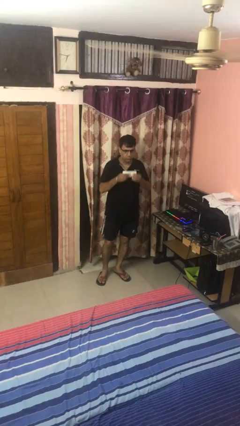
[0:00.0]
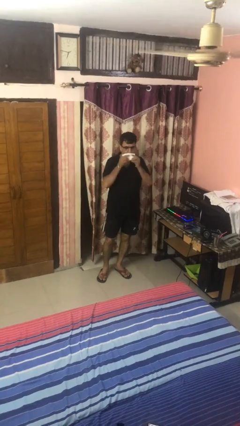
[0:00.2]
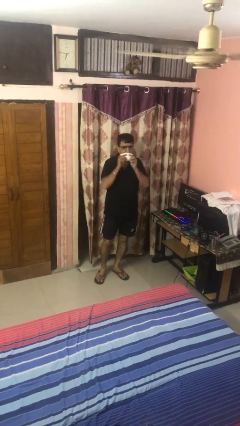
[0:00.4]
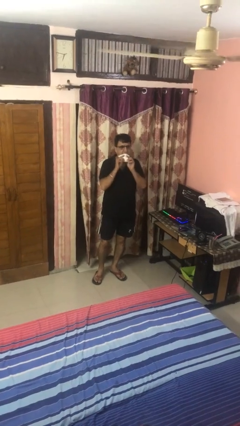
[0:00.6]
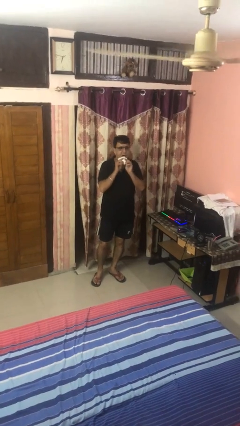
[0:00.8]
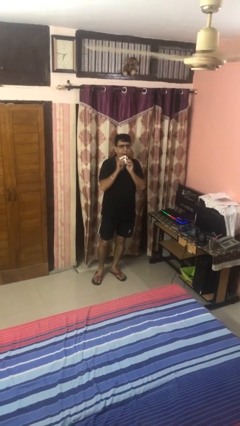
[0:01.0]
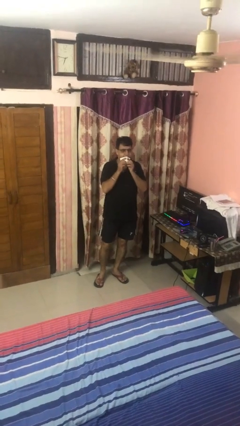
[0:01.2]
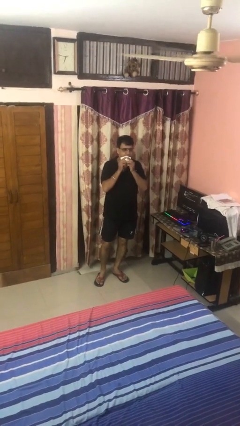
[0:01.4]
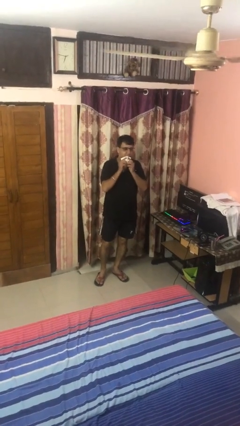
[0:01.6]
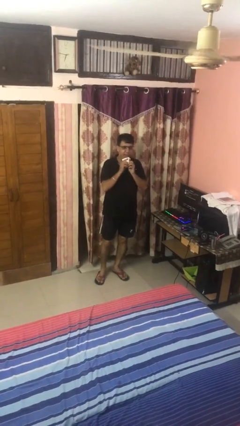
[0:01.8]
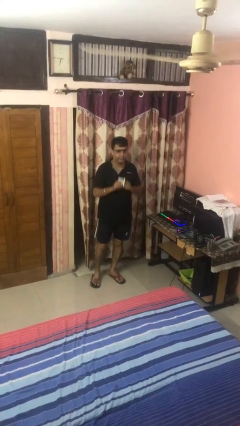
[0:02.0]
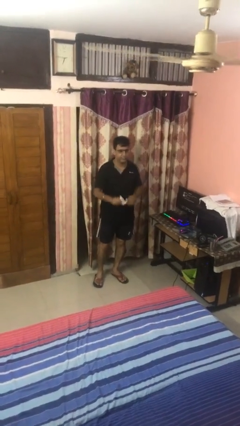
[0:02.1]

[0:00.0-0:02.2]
person wipes mouth with napkin

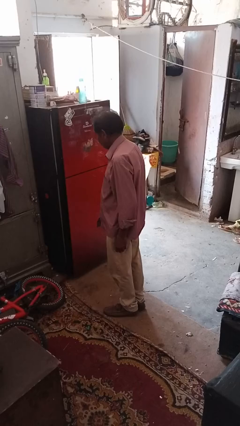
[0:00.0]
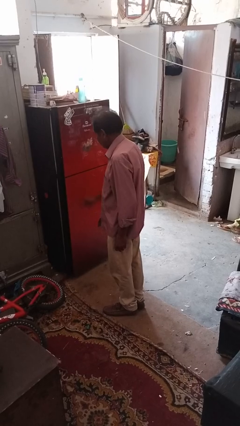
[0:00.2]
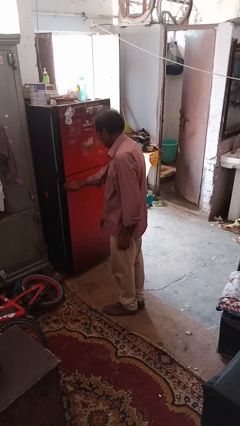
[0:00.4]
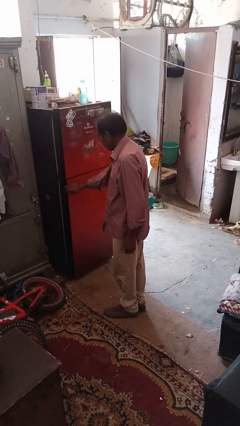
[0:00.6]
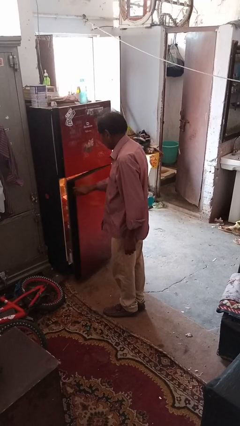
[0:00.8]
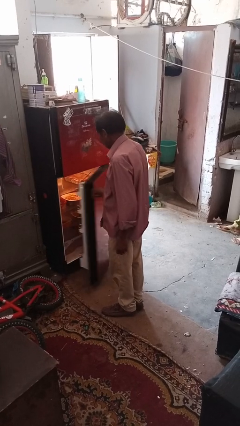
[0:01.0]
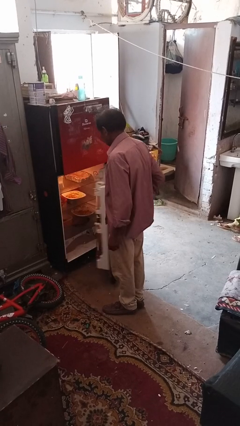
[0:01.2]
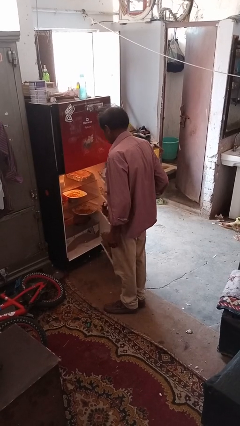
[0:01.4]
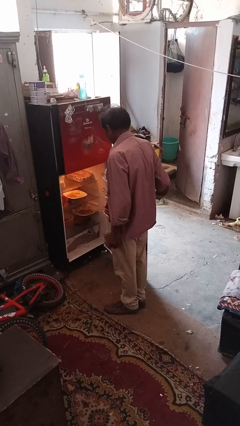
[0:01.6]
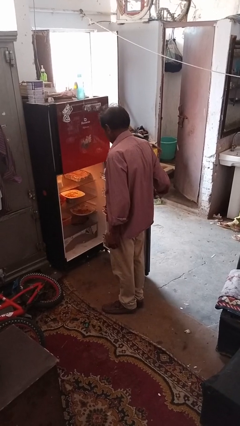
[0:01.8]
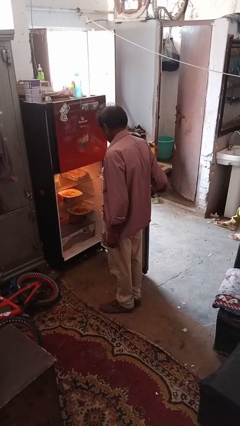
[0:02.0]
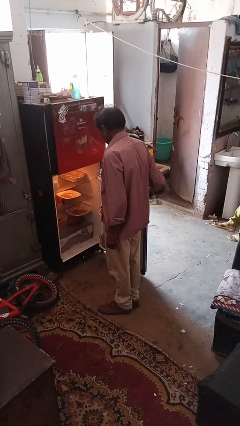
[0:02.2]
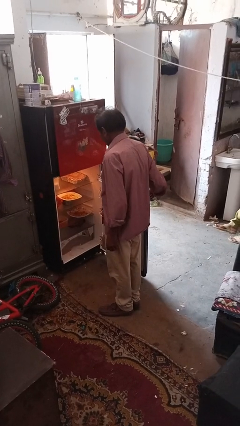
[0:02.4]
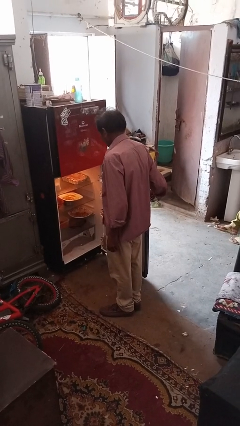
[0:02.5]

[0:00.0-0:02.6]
person opens refrigerator

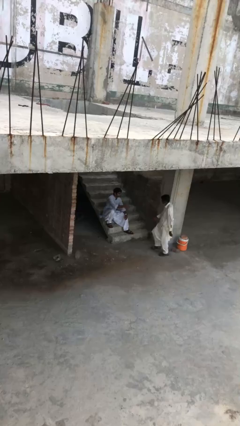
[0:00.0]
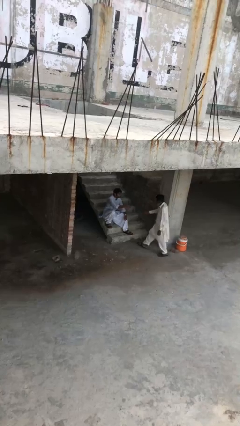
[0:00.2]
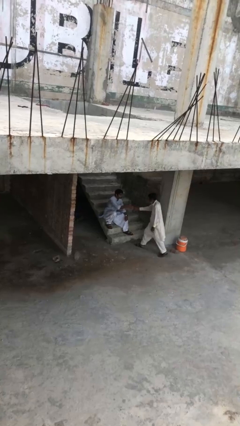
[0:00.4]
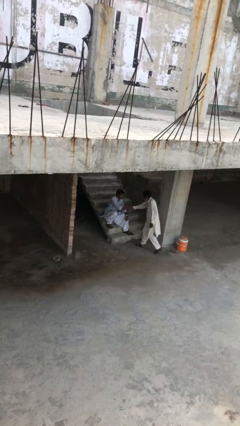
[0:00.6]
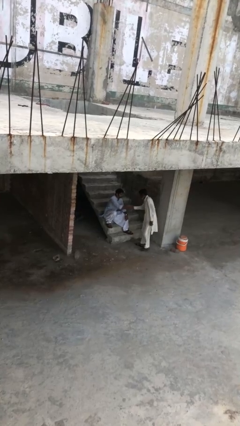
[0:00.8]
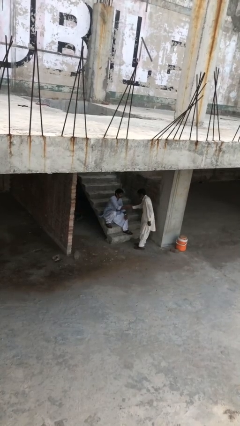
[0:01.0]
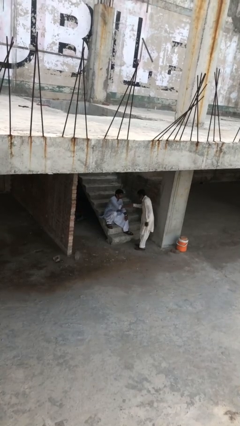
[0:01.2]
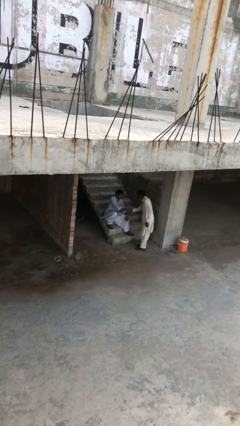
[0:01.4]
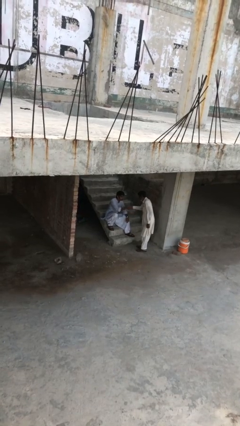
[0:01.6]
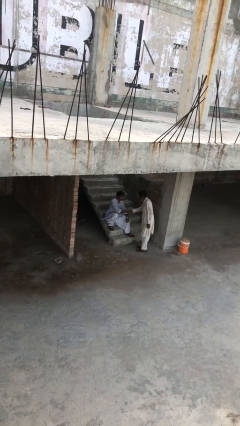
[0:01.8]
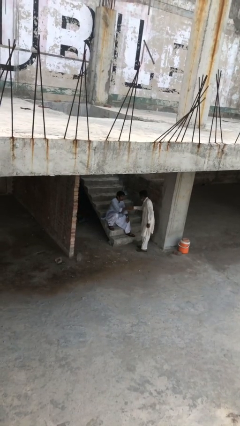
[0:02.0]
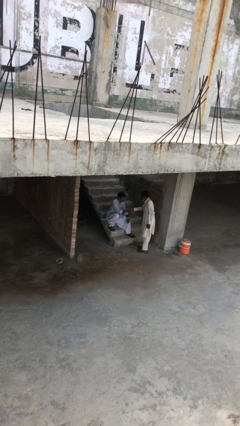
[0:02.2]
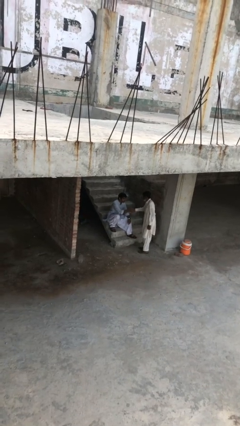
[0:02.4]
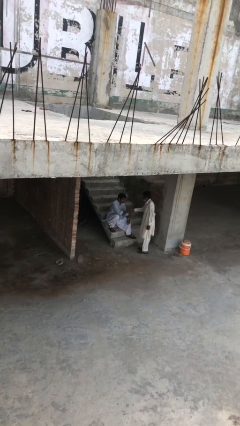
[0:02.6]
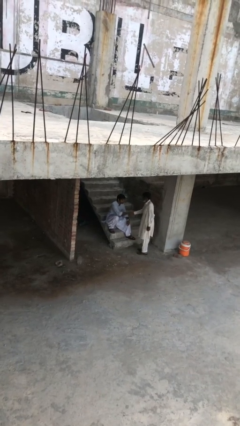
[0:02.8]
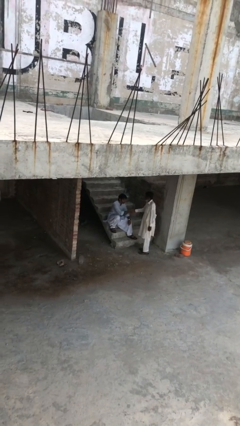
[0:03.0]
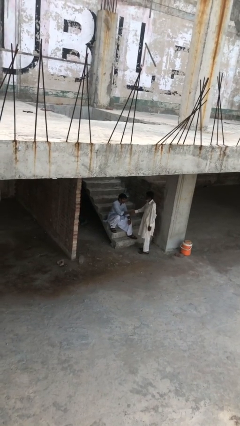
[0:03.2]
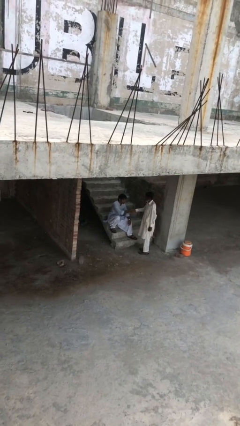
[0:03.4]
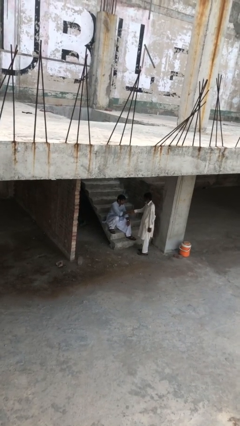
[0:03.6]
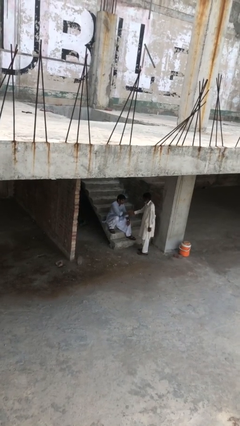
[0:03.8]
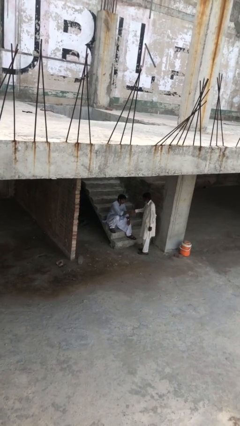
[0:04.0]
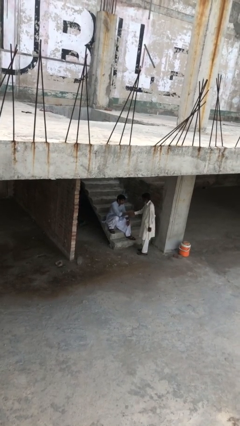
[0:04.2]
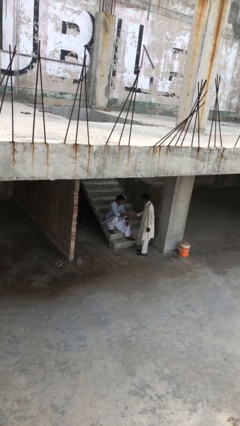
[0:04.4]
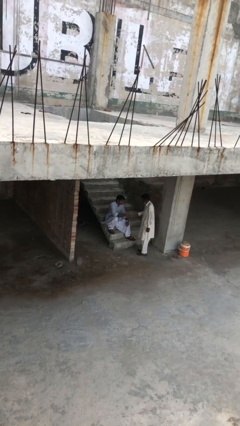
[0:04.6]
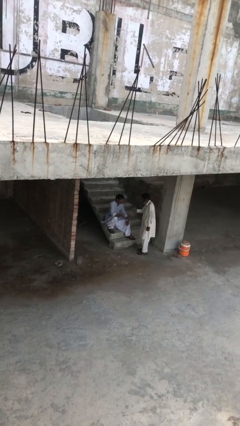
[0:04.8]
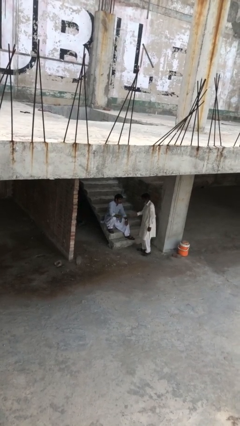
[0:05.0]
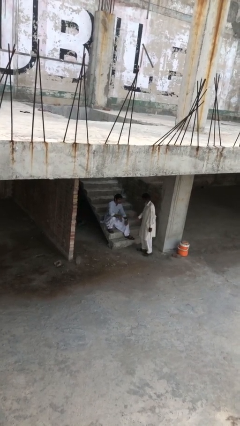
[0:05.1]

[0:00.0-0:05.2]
person shakes hand

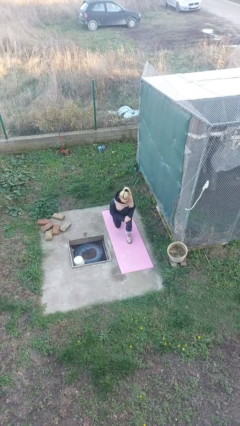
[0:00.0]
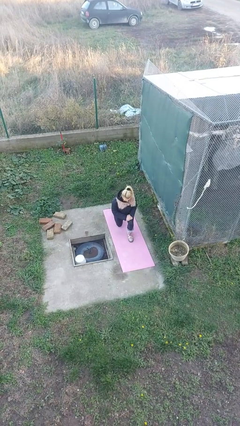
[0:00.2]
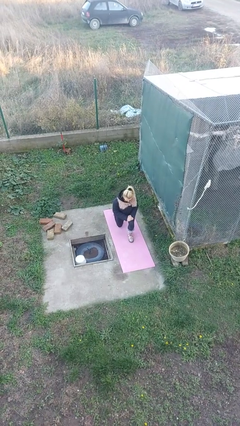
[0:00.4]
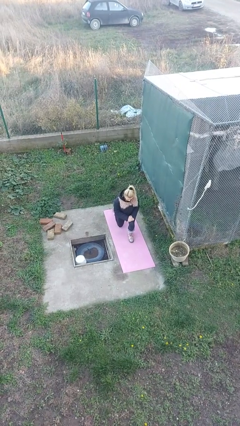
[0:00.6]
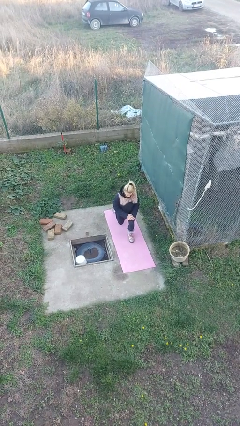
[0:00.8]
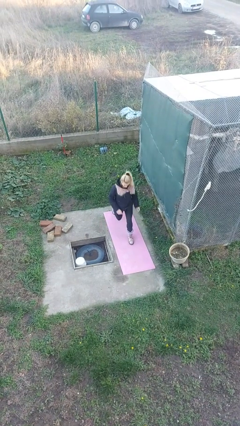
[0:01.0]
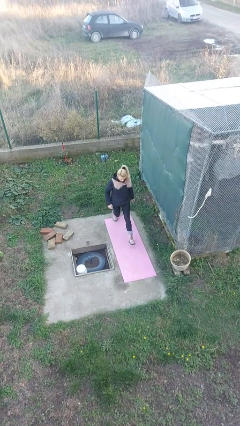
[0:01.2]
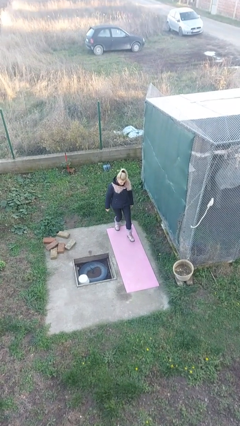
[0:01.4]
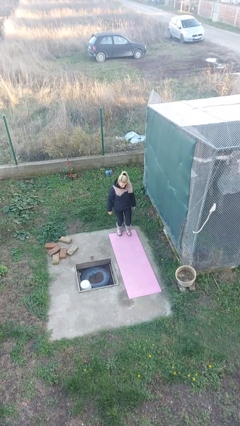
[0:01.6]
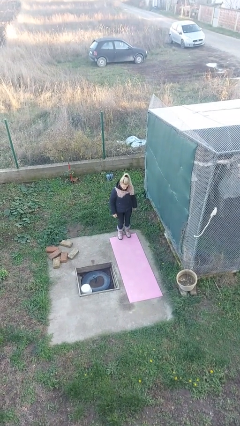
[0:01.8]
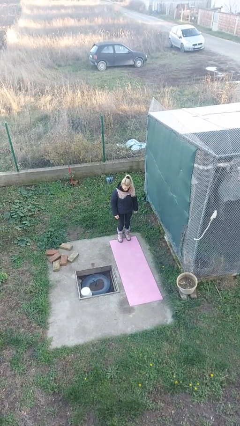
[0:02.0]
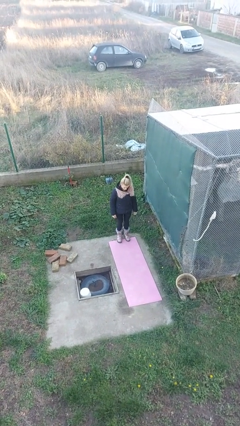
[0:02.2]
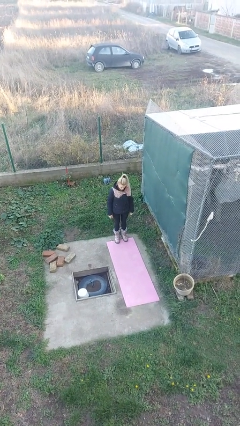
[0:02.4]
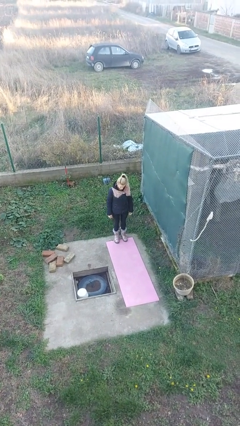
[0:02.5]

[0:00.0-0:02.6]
person stands up from floor

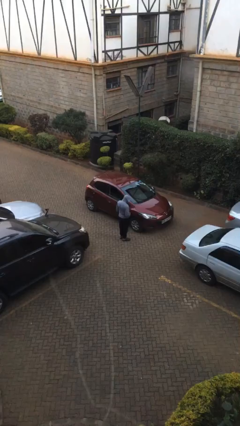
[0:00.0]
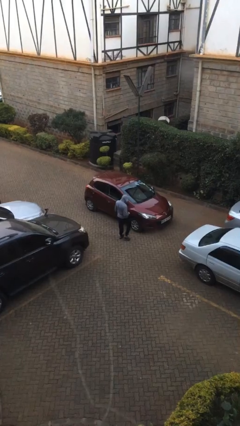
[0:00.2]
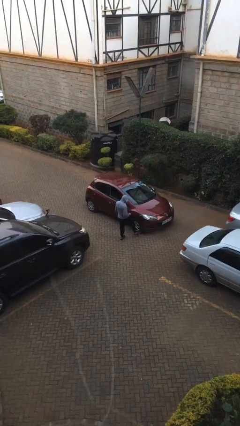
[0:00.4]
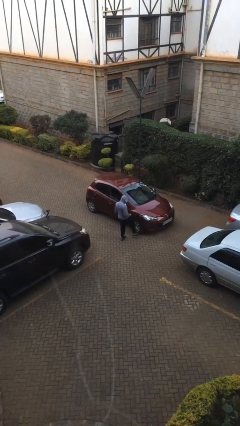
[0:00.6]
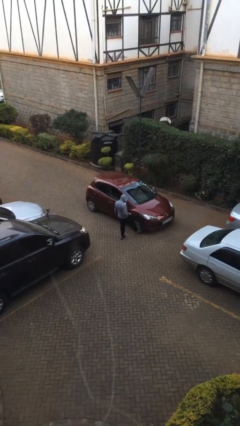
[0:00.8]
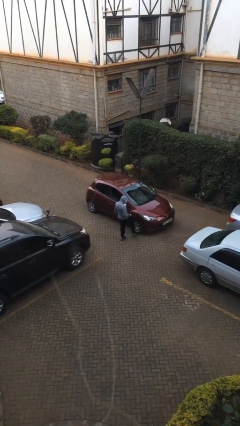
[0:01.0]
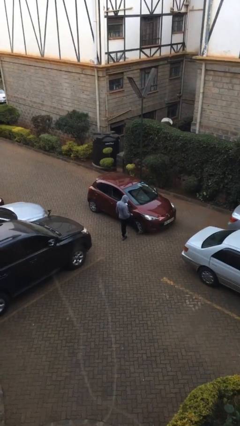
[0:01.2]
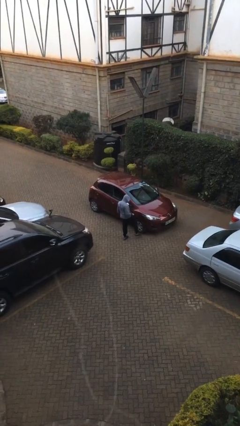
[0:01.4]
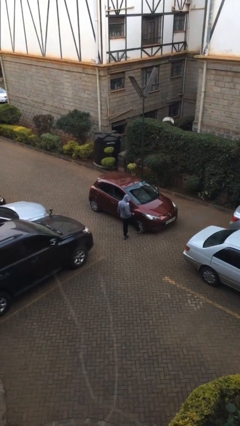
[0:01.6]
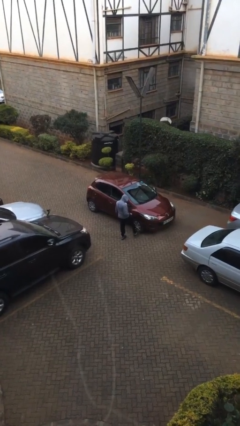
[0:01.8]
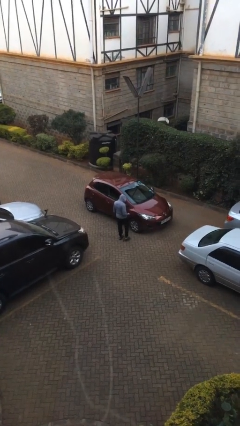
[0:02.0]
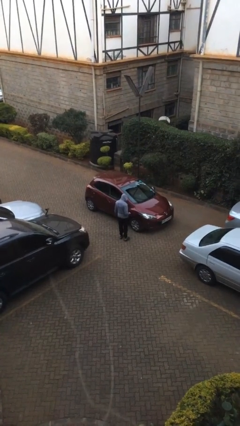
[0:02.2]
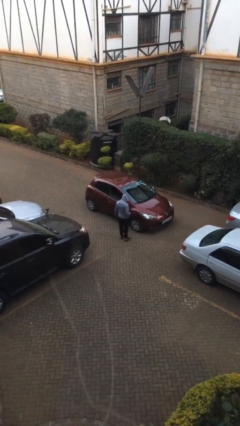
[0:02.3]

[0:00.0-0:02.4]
person kicks car tires

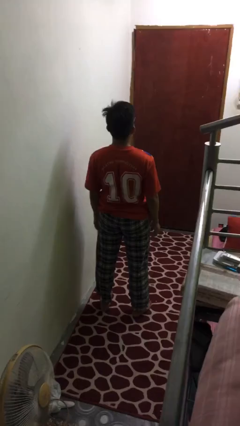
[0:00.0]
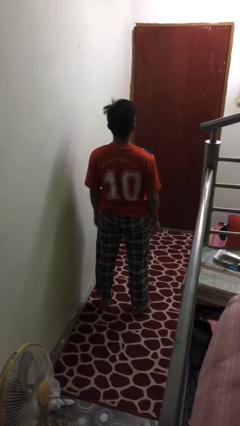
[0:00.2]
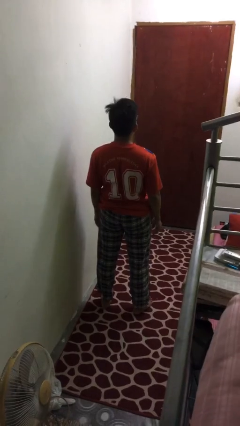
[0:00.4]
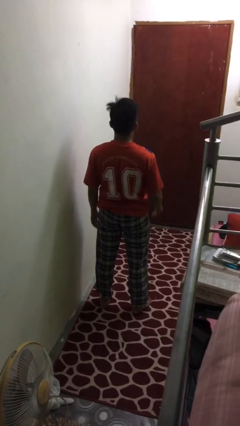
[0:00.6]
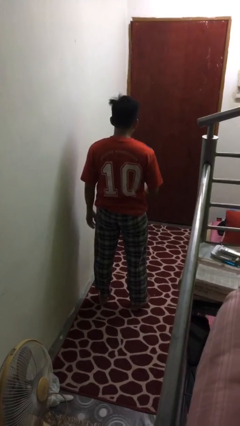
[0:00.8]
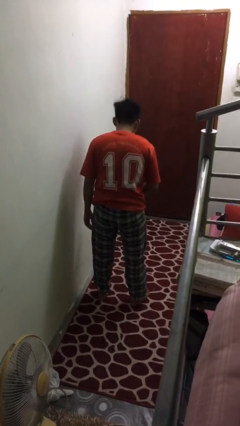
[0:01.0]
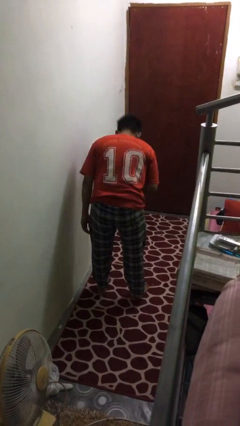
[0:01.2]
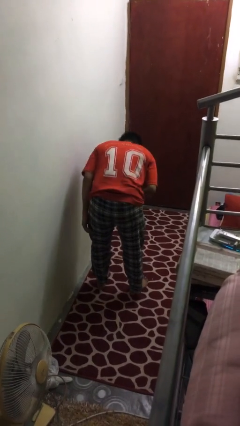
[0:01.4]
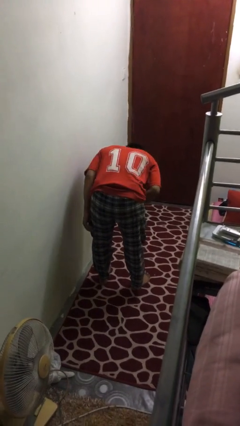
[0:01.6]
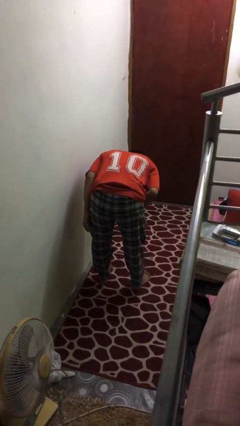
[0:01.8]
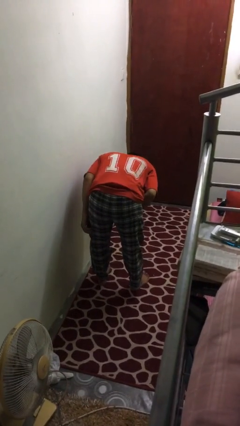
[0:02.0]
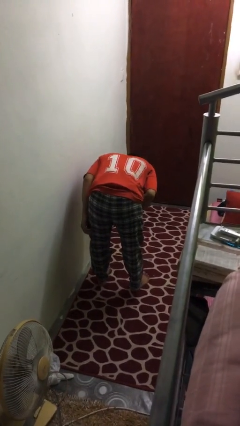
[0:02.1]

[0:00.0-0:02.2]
person bows
